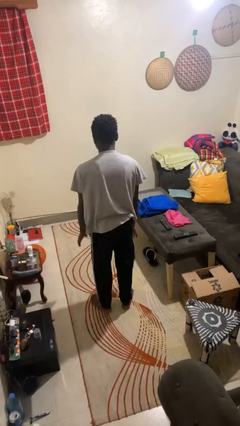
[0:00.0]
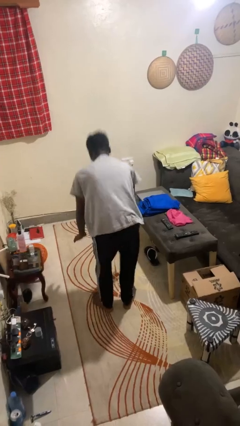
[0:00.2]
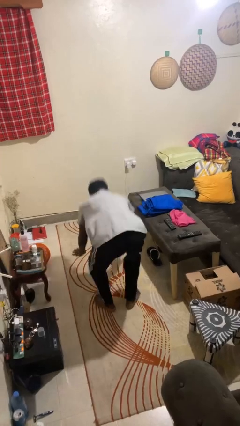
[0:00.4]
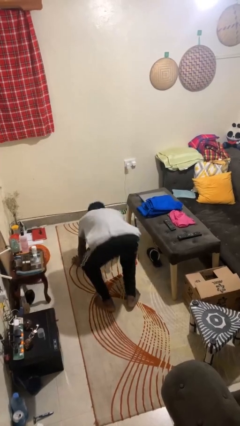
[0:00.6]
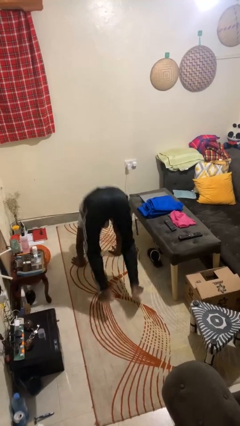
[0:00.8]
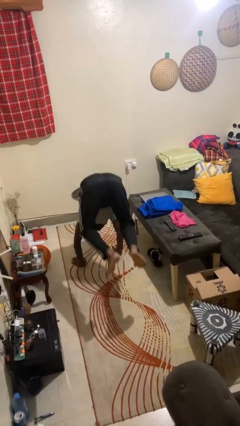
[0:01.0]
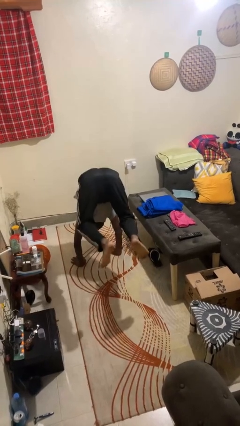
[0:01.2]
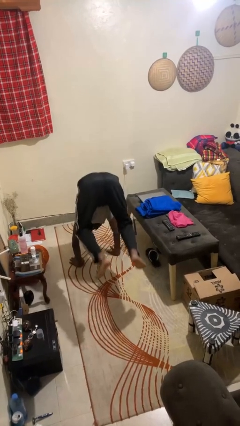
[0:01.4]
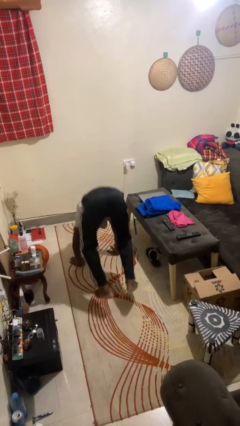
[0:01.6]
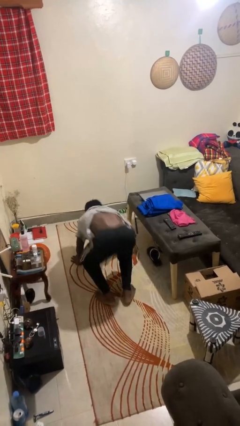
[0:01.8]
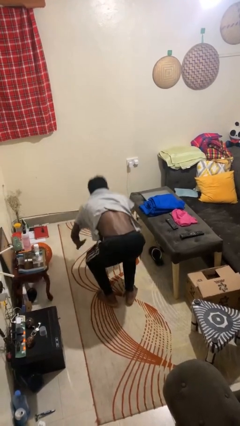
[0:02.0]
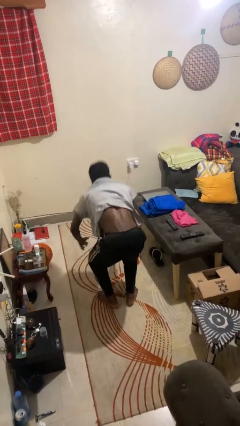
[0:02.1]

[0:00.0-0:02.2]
person handstand

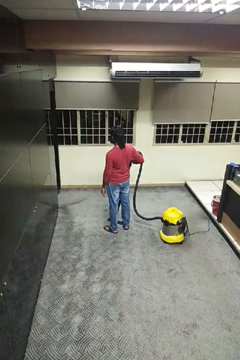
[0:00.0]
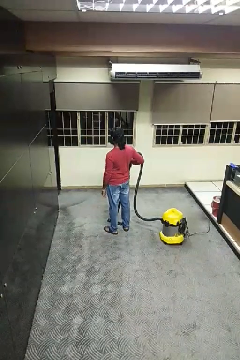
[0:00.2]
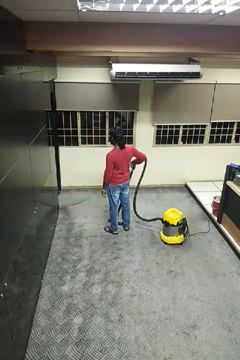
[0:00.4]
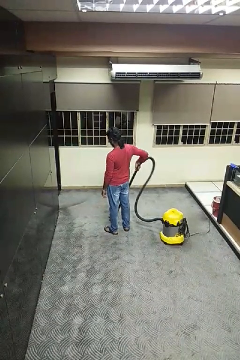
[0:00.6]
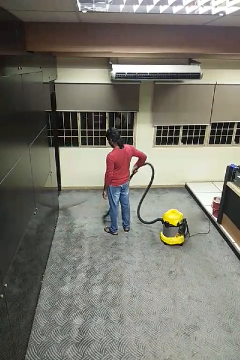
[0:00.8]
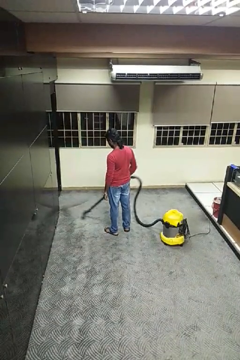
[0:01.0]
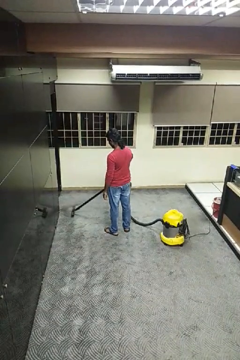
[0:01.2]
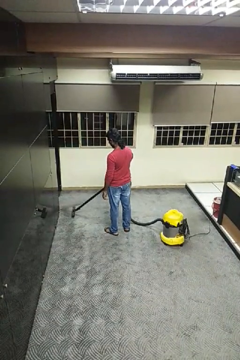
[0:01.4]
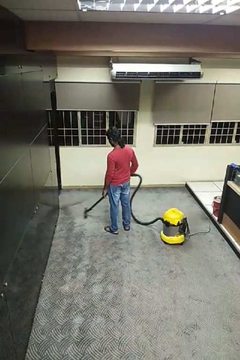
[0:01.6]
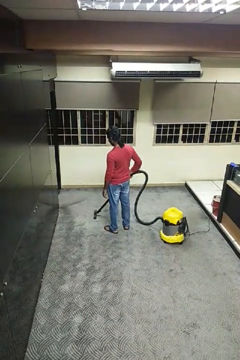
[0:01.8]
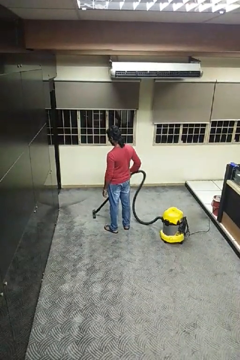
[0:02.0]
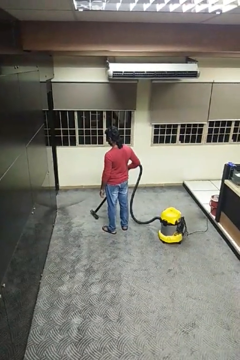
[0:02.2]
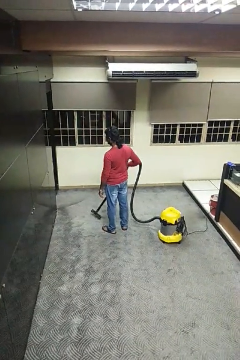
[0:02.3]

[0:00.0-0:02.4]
person vacuums carpet

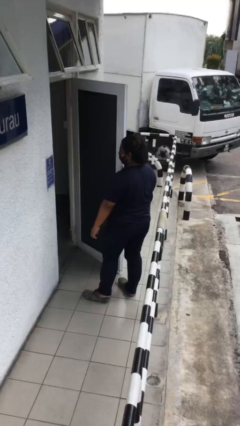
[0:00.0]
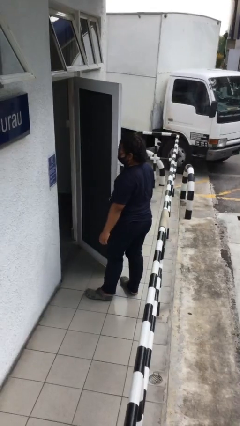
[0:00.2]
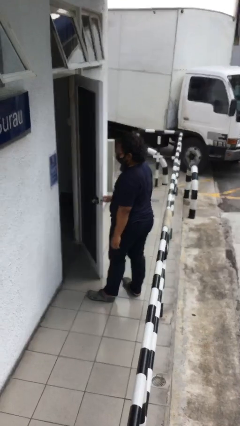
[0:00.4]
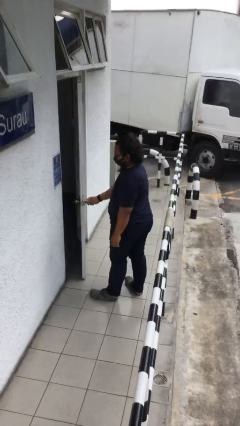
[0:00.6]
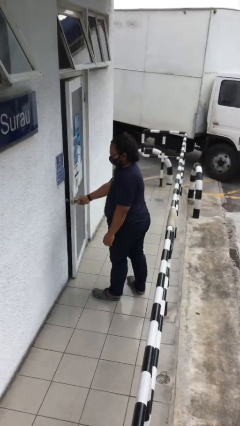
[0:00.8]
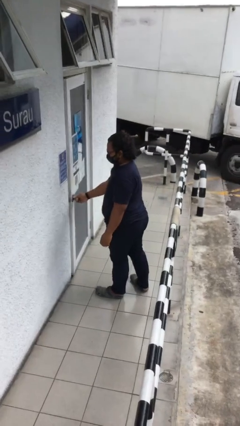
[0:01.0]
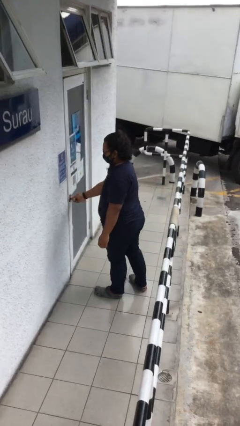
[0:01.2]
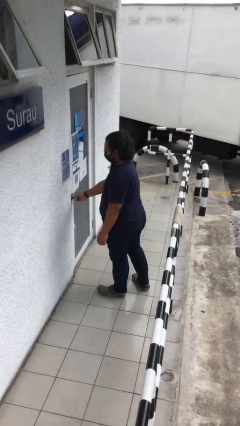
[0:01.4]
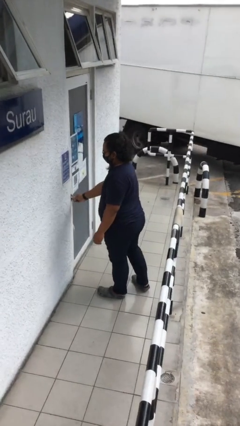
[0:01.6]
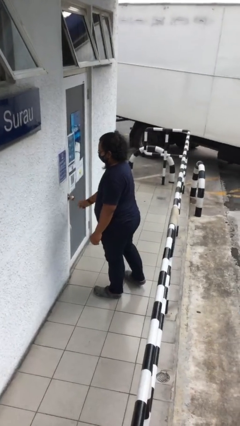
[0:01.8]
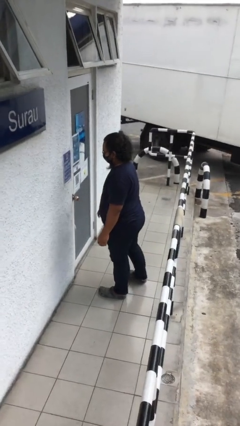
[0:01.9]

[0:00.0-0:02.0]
person closes facility door

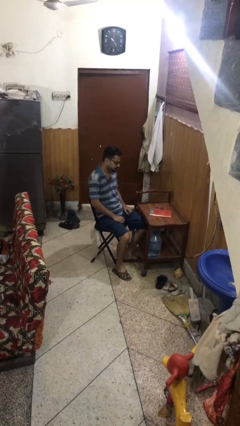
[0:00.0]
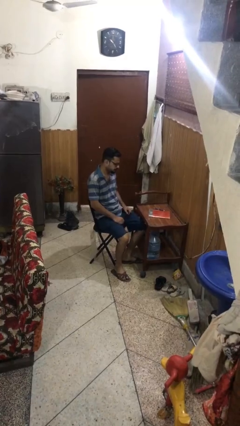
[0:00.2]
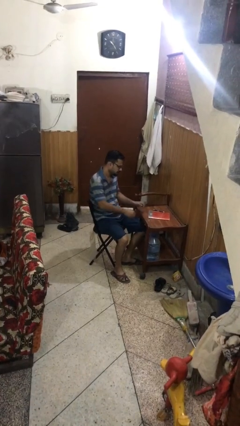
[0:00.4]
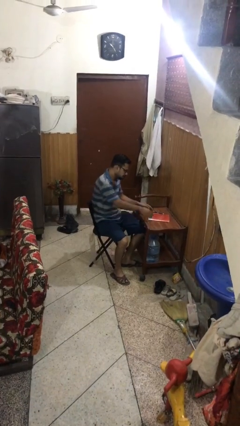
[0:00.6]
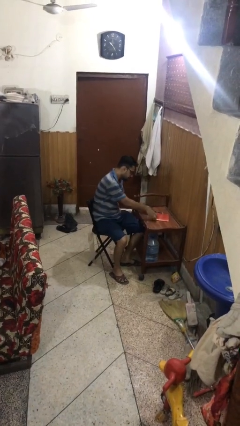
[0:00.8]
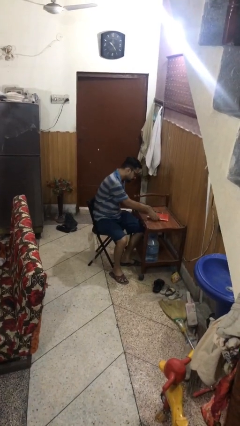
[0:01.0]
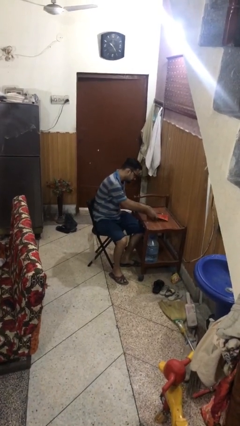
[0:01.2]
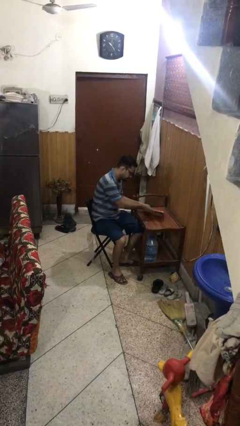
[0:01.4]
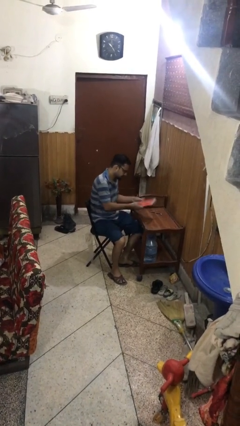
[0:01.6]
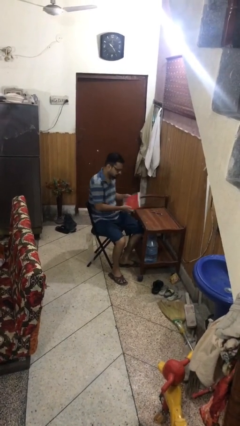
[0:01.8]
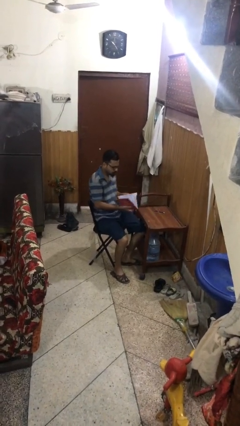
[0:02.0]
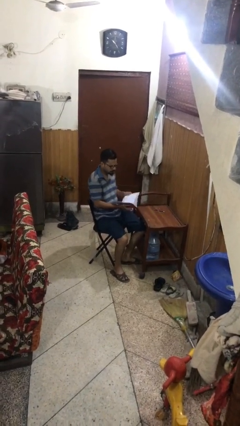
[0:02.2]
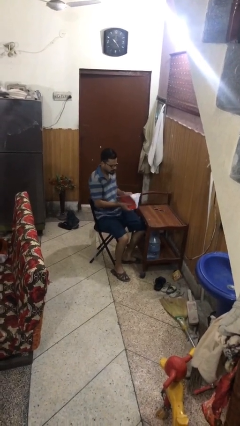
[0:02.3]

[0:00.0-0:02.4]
person picks up object from table

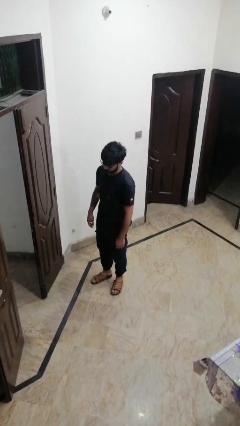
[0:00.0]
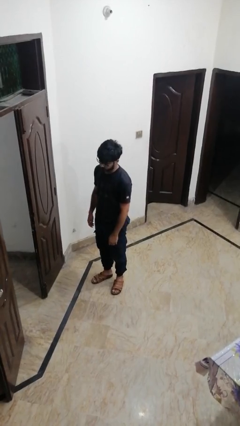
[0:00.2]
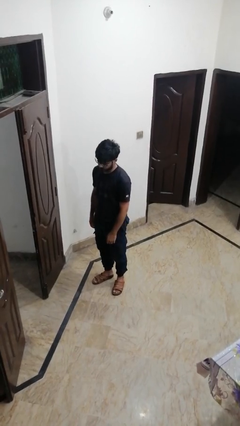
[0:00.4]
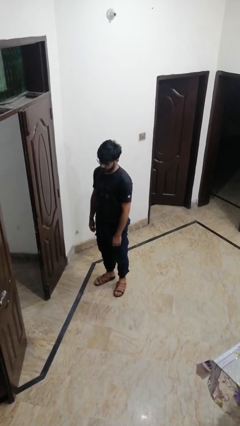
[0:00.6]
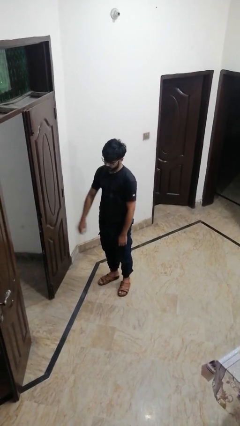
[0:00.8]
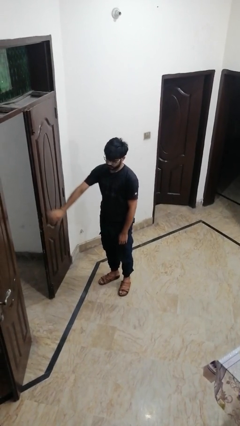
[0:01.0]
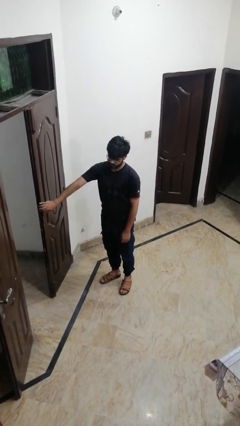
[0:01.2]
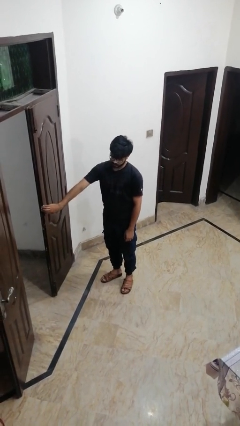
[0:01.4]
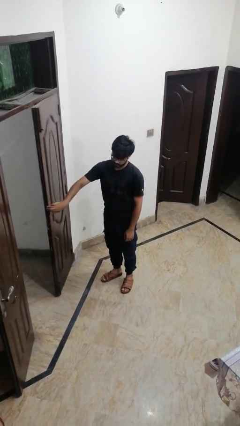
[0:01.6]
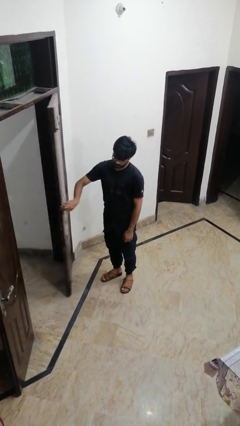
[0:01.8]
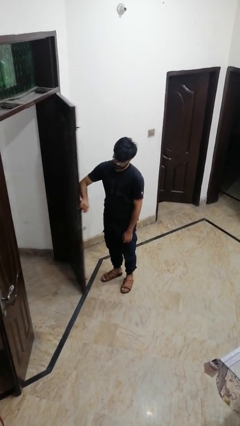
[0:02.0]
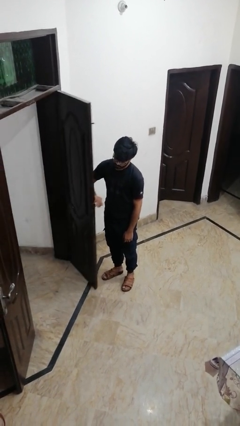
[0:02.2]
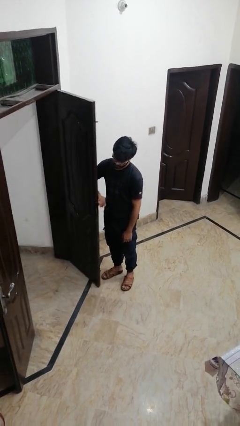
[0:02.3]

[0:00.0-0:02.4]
person opens facility door

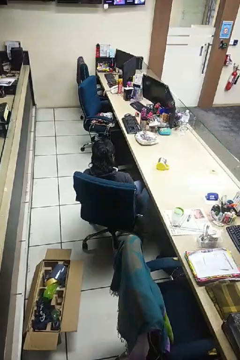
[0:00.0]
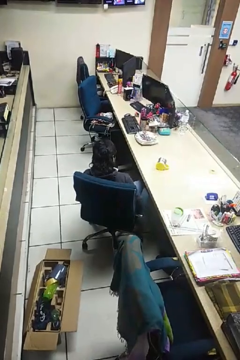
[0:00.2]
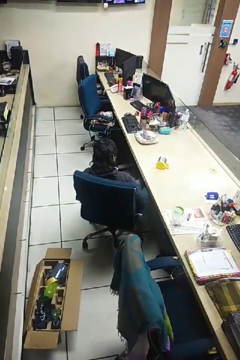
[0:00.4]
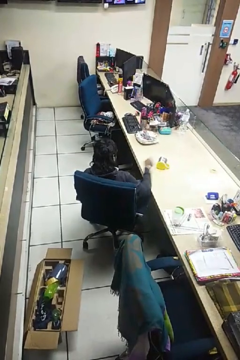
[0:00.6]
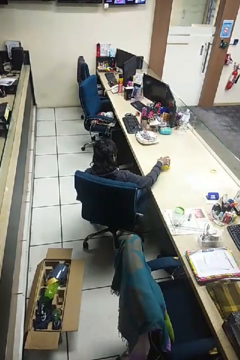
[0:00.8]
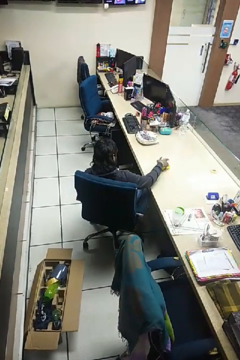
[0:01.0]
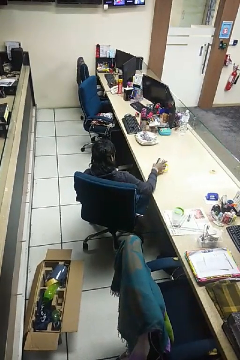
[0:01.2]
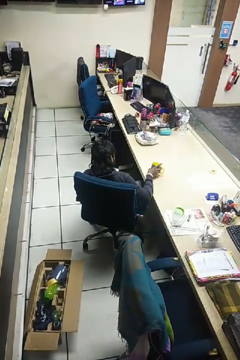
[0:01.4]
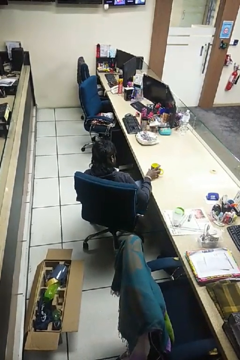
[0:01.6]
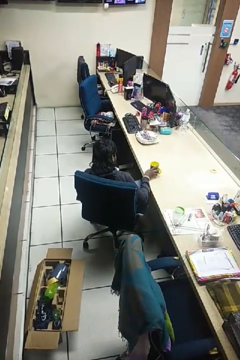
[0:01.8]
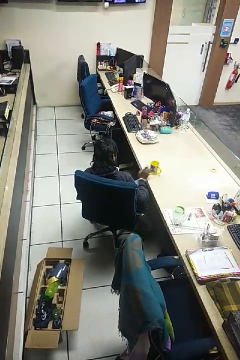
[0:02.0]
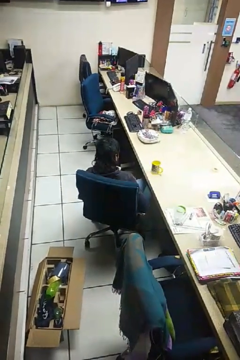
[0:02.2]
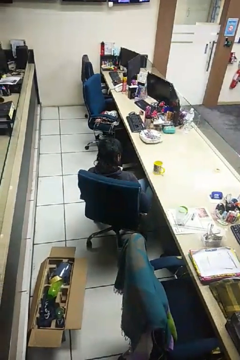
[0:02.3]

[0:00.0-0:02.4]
person sets upright glass

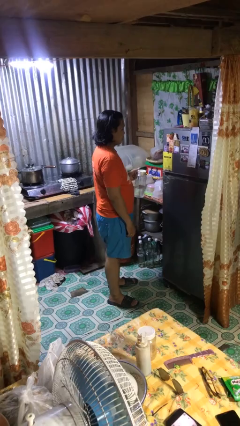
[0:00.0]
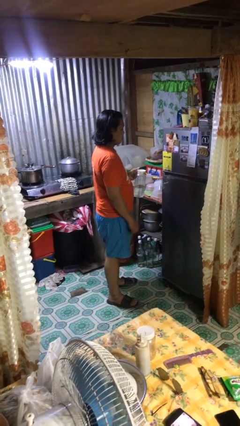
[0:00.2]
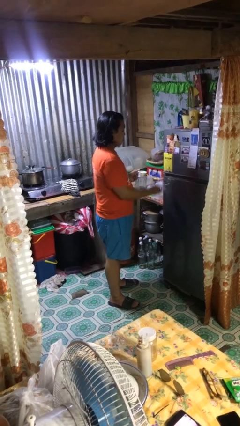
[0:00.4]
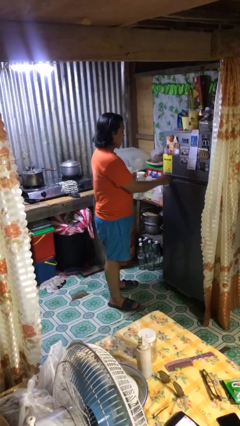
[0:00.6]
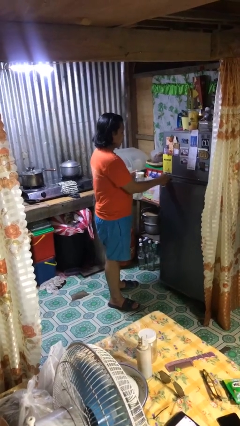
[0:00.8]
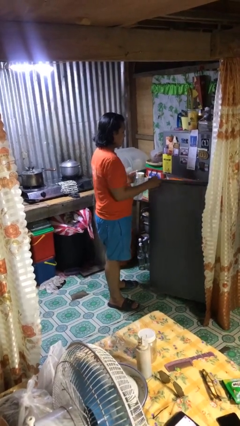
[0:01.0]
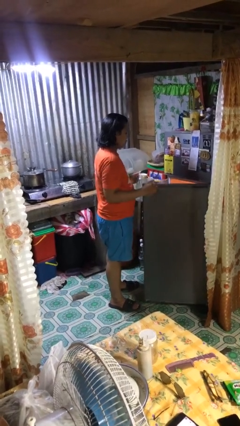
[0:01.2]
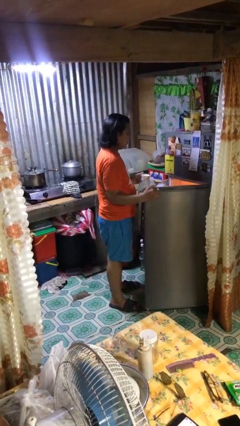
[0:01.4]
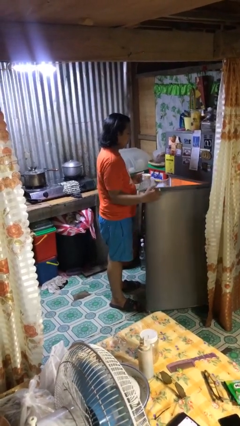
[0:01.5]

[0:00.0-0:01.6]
person opens refrigerator

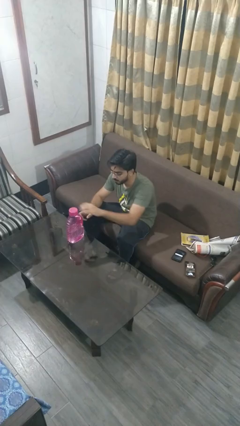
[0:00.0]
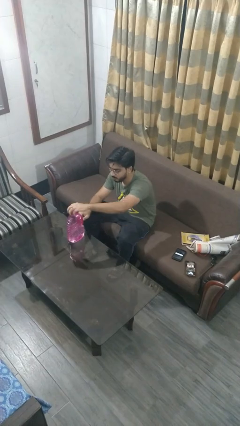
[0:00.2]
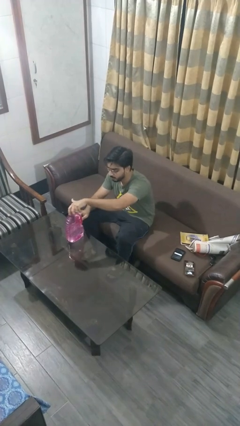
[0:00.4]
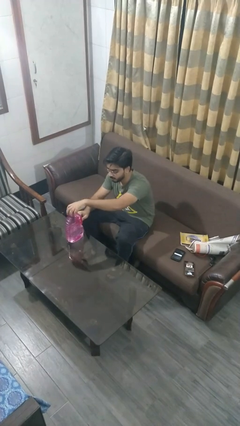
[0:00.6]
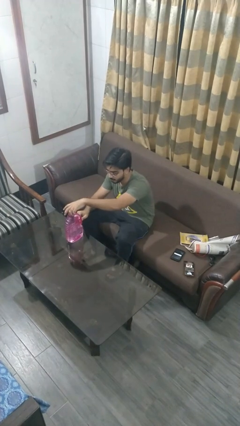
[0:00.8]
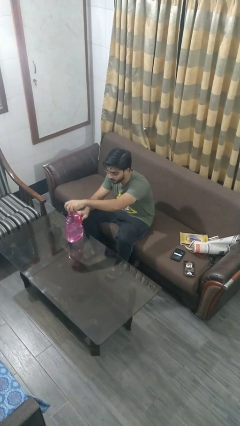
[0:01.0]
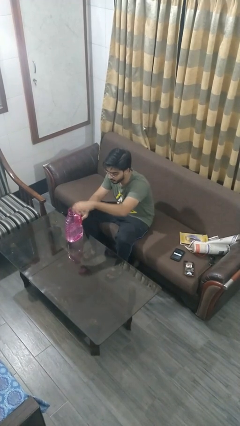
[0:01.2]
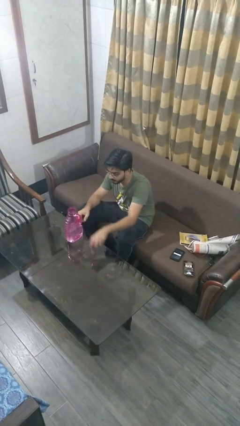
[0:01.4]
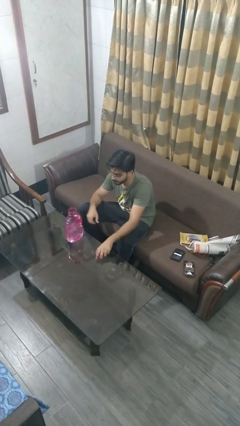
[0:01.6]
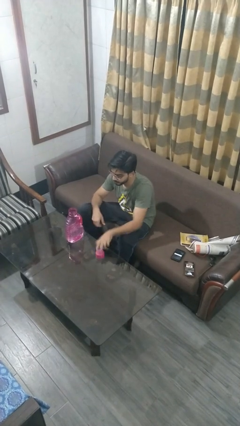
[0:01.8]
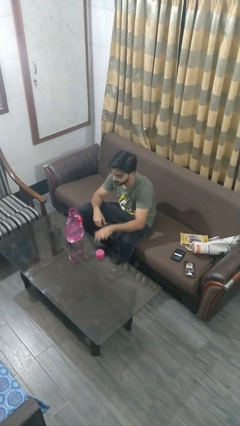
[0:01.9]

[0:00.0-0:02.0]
person unscrews lid from bottle

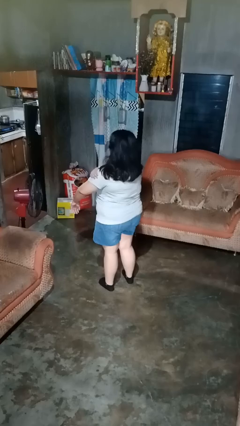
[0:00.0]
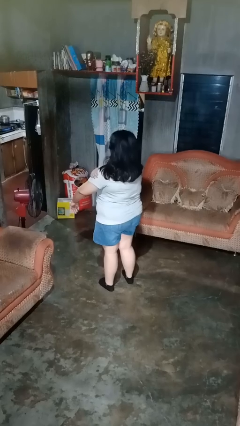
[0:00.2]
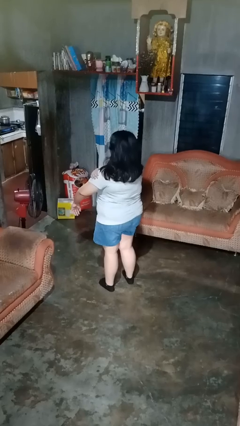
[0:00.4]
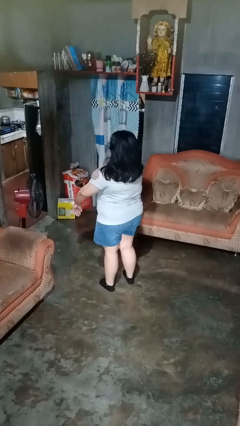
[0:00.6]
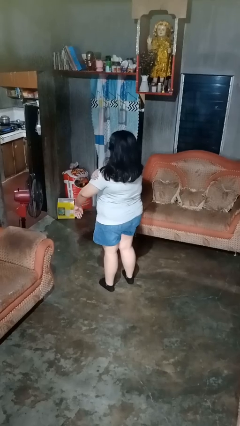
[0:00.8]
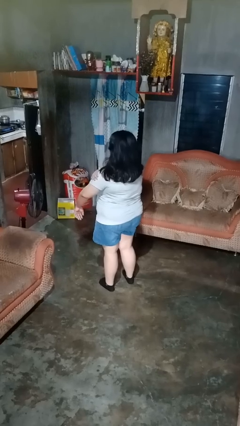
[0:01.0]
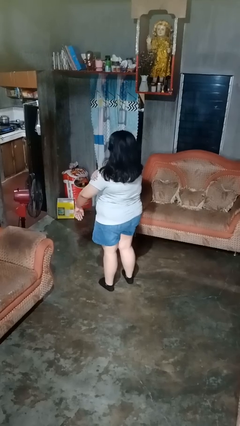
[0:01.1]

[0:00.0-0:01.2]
person swats bug
